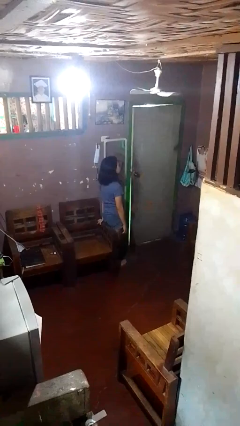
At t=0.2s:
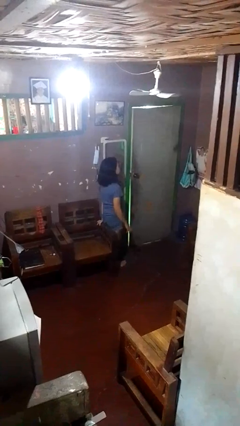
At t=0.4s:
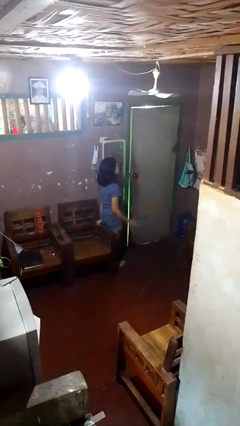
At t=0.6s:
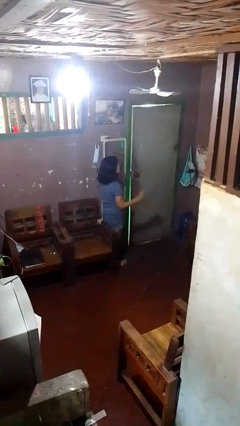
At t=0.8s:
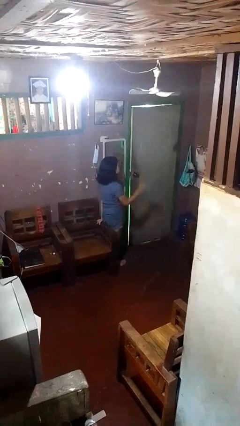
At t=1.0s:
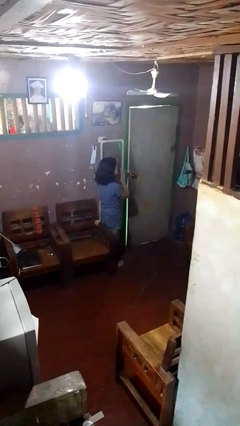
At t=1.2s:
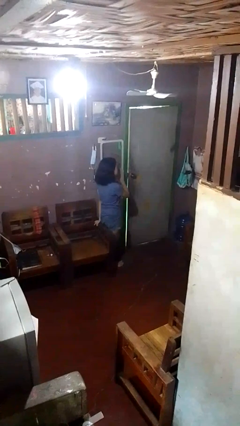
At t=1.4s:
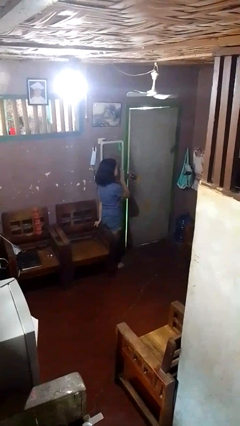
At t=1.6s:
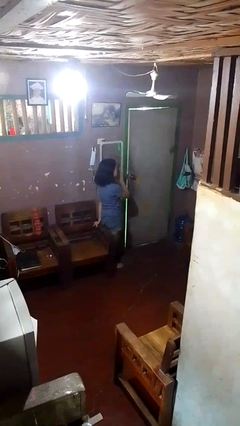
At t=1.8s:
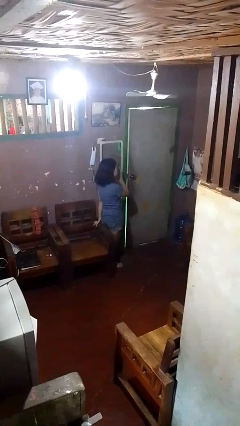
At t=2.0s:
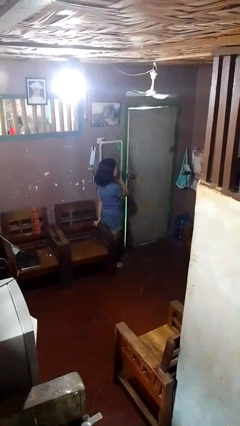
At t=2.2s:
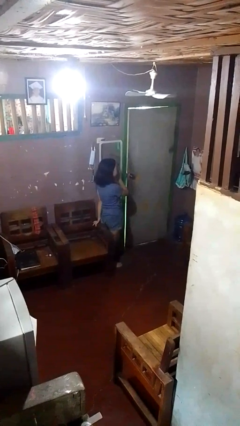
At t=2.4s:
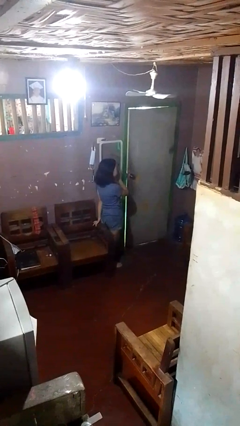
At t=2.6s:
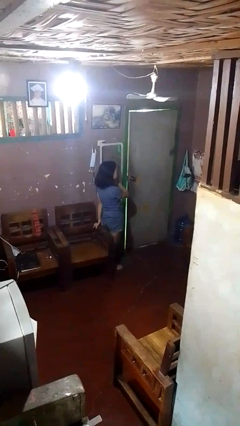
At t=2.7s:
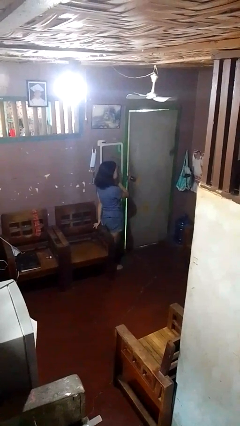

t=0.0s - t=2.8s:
person gestures swipe left

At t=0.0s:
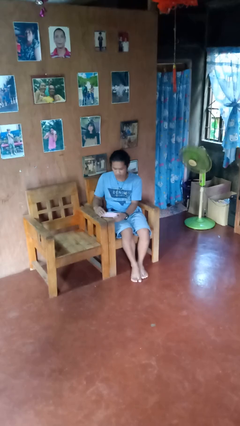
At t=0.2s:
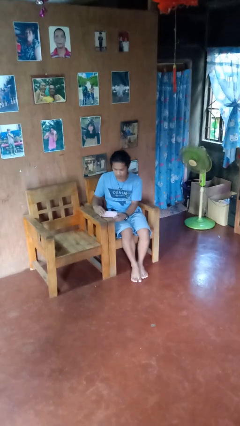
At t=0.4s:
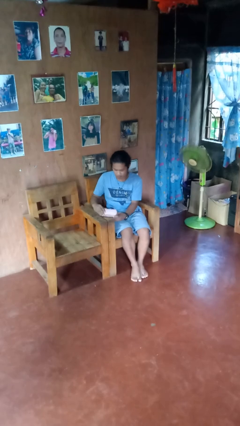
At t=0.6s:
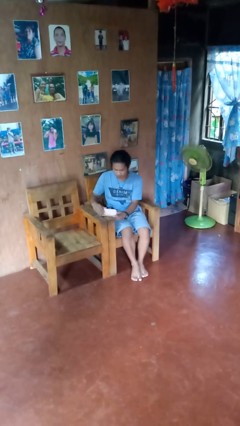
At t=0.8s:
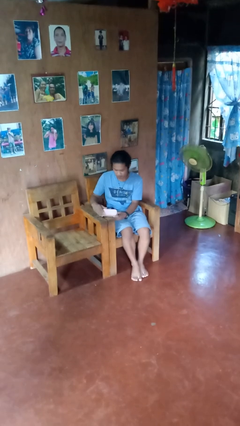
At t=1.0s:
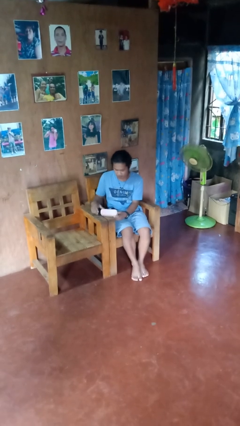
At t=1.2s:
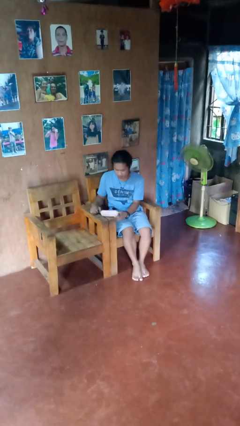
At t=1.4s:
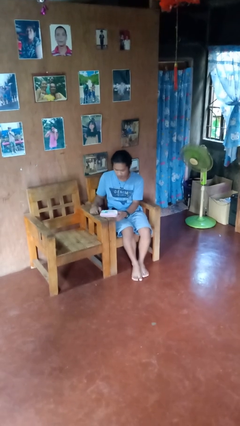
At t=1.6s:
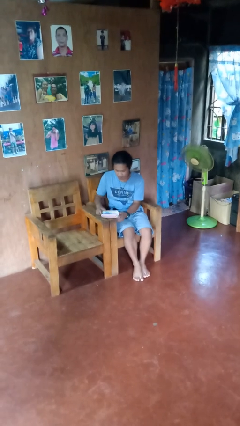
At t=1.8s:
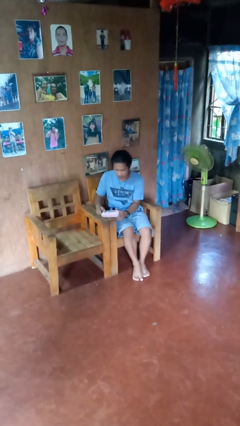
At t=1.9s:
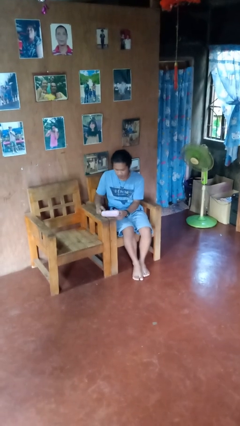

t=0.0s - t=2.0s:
person opens jewelry box

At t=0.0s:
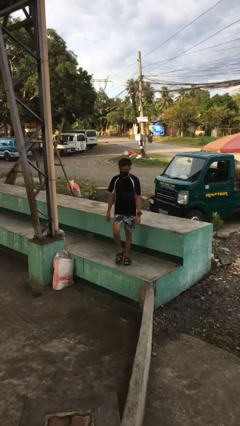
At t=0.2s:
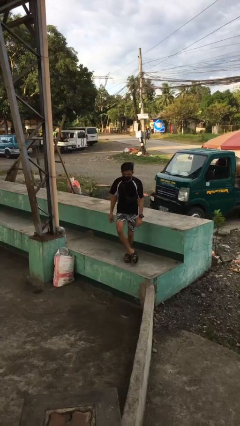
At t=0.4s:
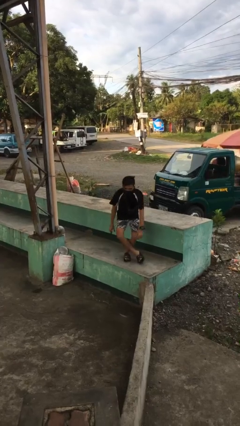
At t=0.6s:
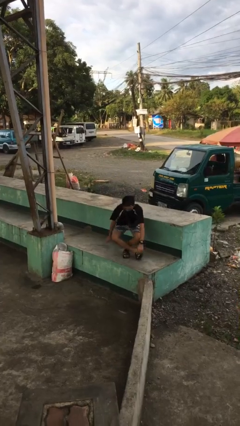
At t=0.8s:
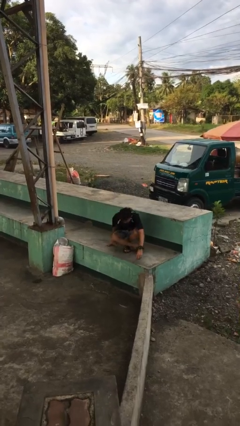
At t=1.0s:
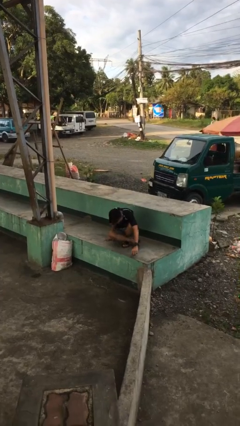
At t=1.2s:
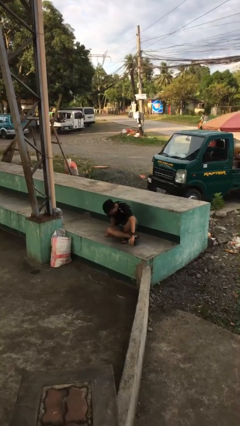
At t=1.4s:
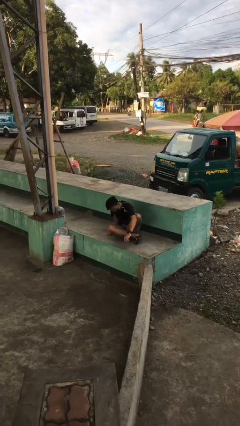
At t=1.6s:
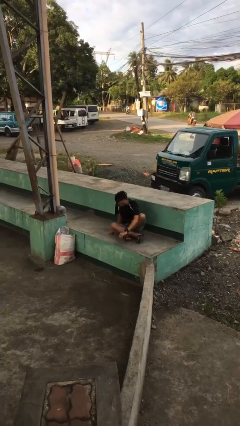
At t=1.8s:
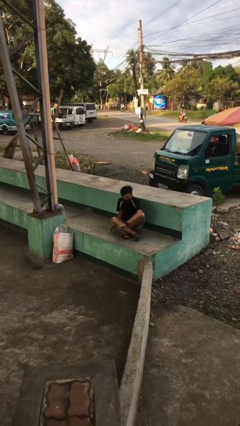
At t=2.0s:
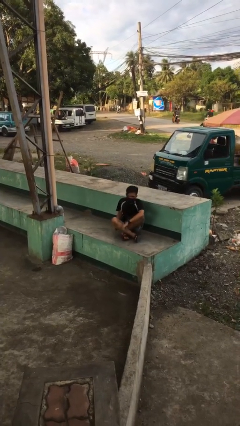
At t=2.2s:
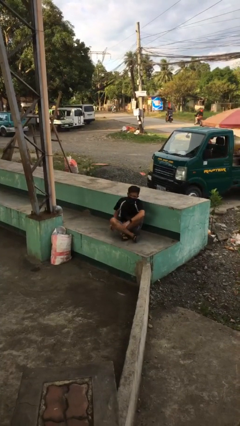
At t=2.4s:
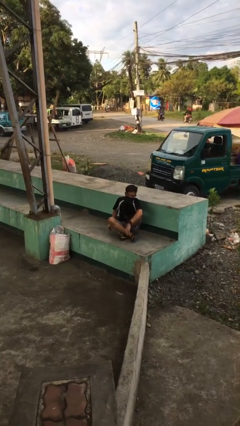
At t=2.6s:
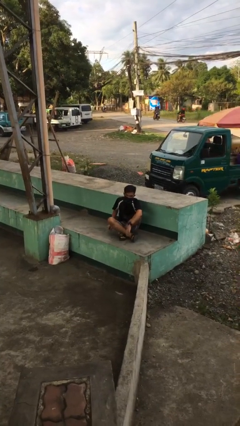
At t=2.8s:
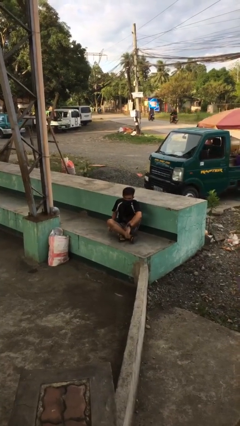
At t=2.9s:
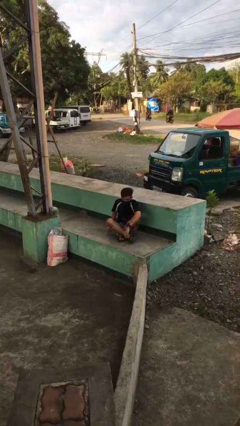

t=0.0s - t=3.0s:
person sits crisscross

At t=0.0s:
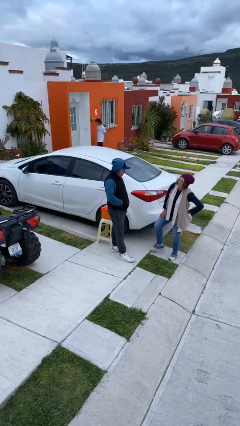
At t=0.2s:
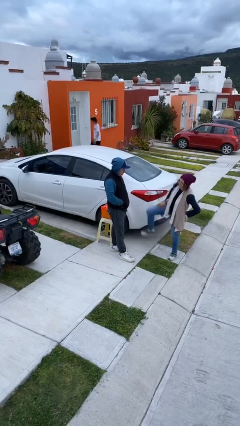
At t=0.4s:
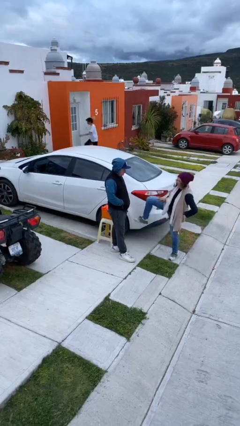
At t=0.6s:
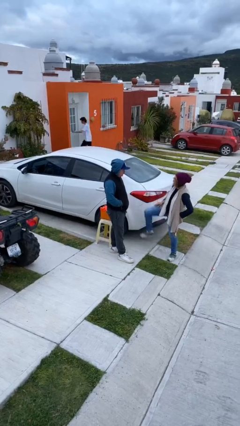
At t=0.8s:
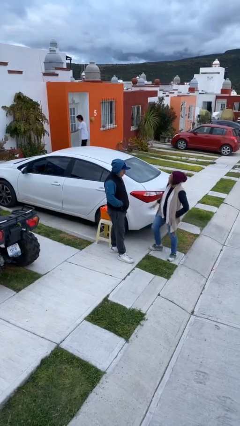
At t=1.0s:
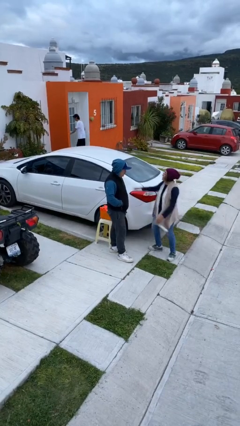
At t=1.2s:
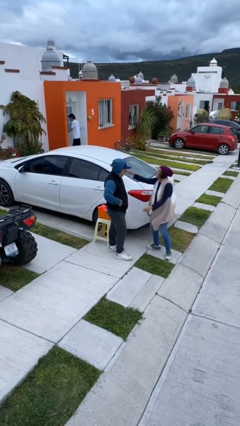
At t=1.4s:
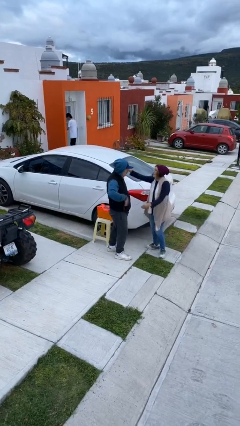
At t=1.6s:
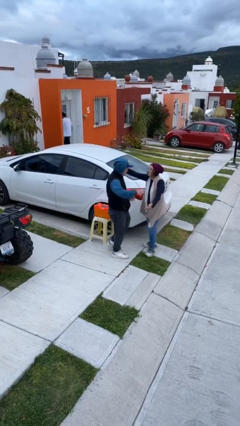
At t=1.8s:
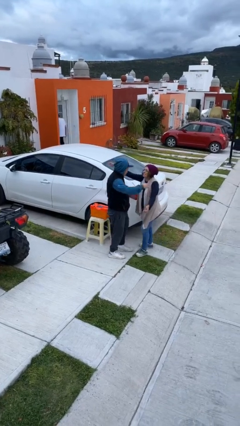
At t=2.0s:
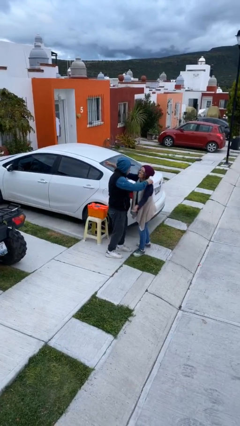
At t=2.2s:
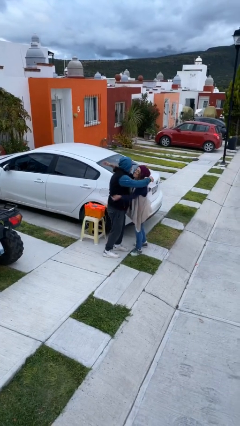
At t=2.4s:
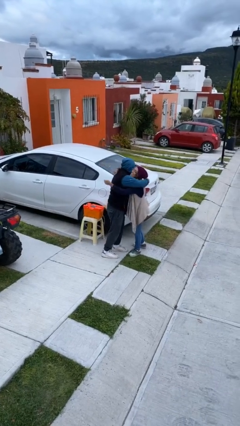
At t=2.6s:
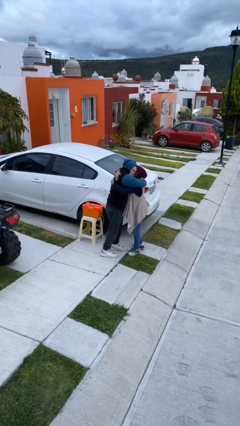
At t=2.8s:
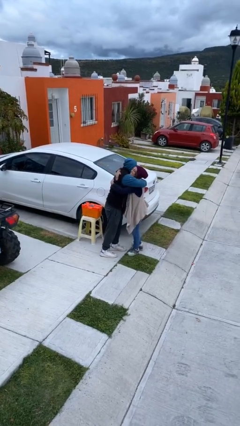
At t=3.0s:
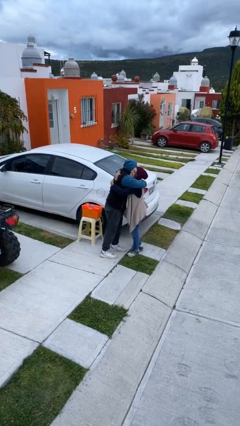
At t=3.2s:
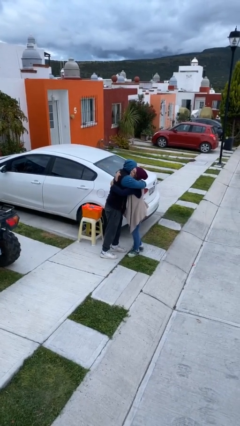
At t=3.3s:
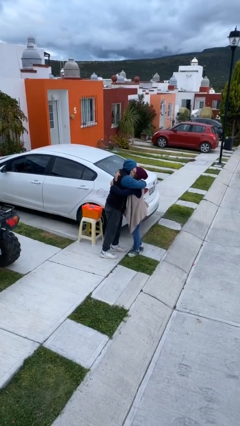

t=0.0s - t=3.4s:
person embraces person

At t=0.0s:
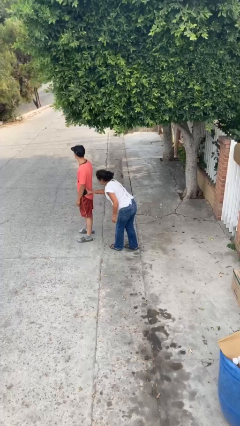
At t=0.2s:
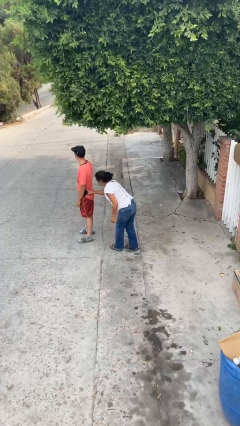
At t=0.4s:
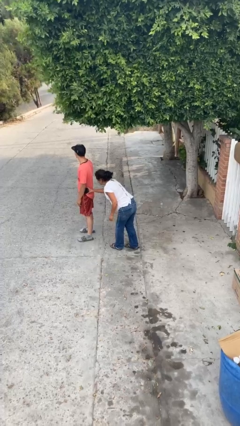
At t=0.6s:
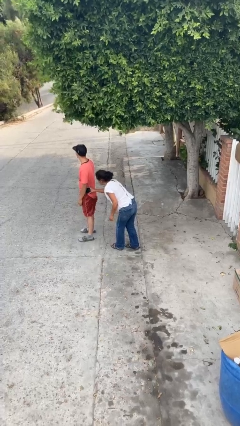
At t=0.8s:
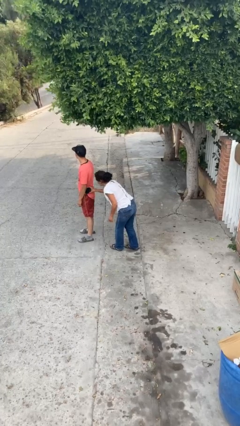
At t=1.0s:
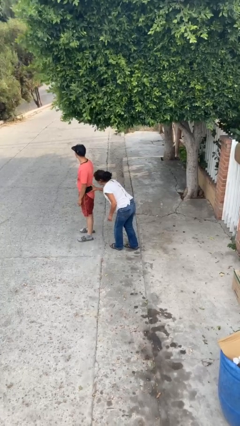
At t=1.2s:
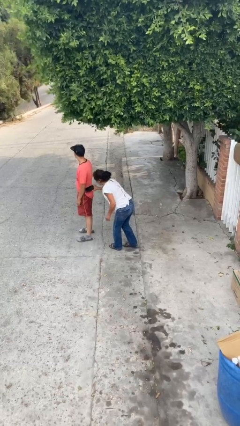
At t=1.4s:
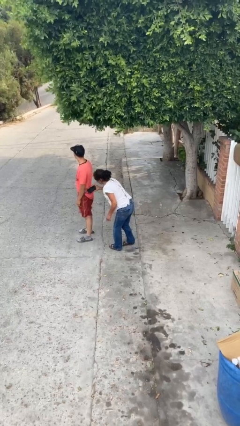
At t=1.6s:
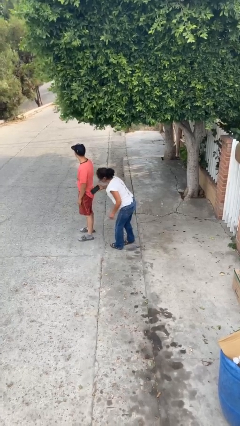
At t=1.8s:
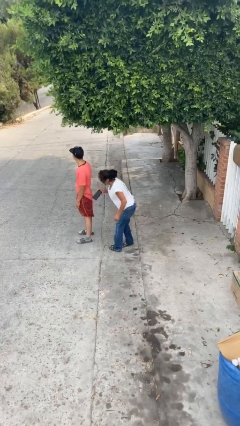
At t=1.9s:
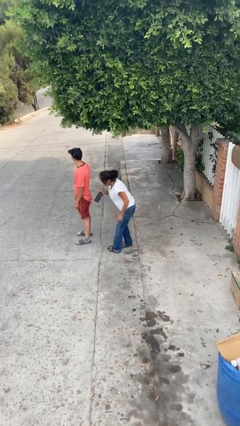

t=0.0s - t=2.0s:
person steals object from person

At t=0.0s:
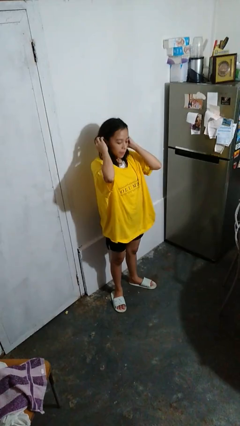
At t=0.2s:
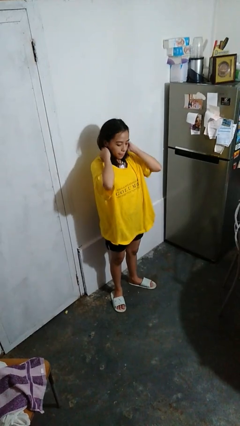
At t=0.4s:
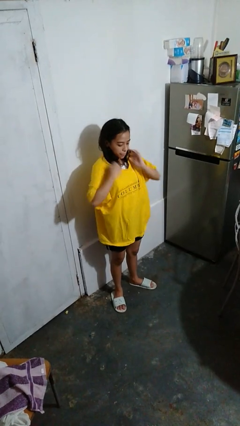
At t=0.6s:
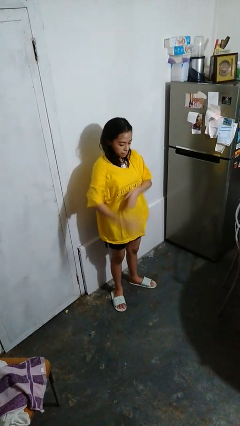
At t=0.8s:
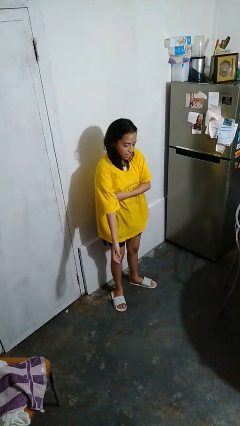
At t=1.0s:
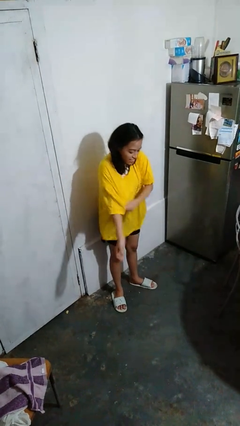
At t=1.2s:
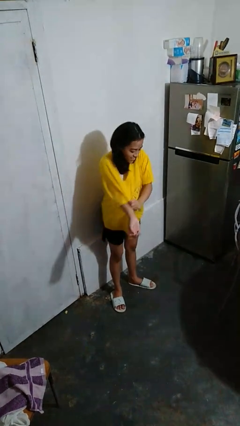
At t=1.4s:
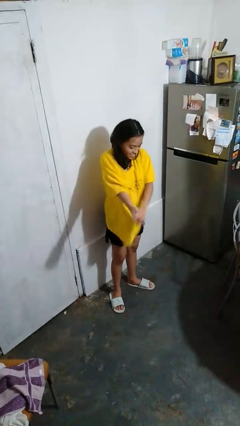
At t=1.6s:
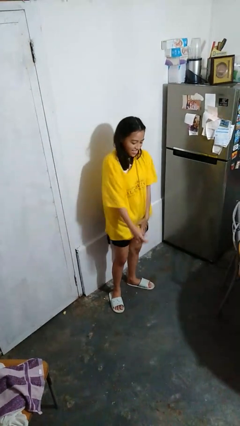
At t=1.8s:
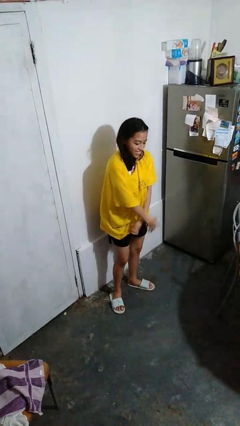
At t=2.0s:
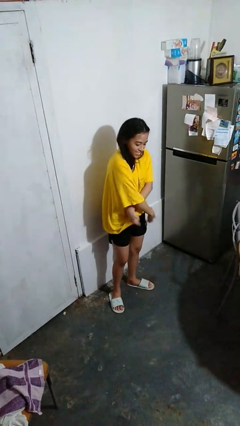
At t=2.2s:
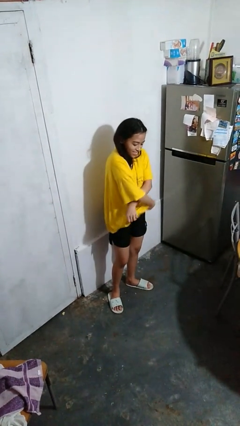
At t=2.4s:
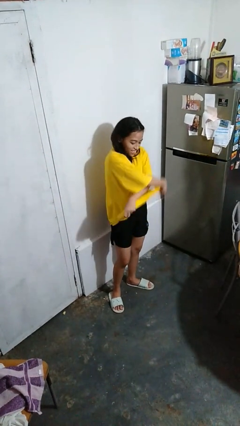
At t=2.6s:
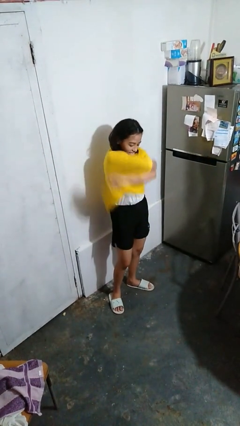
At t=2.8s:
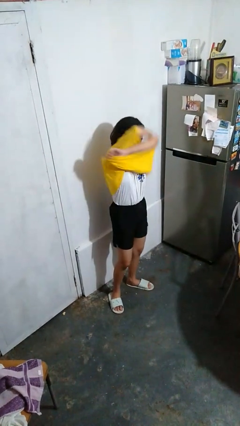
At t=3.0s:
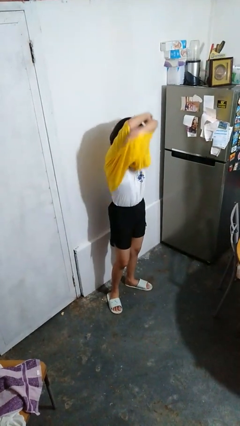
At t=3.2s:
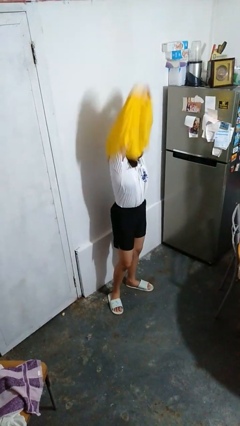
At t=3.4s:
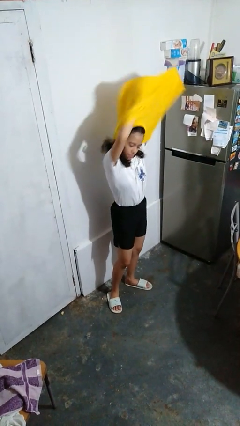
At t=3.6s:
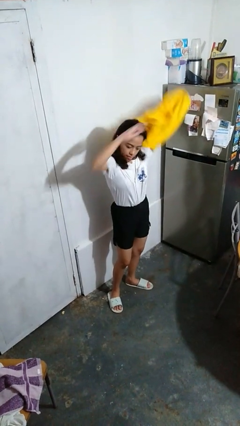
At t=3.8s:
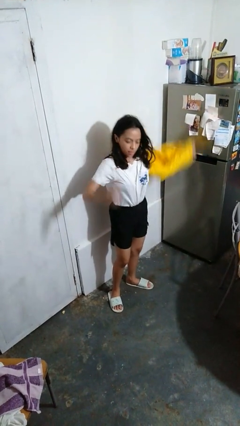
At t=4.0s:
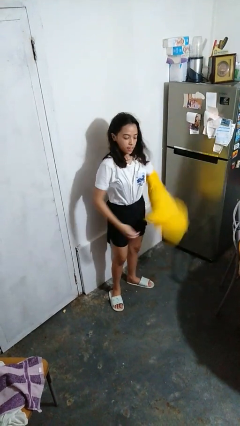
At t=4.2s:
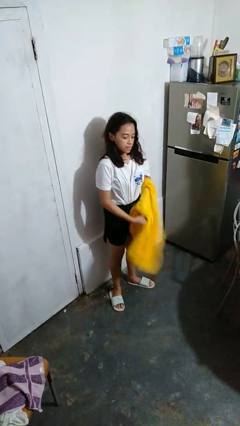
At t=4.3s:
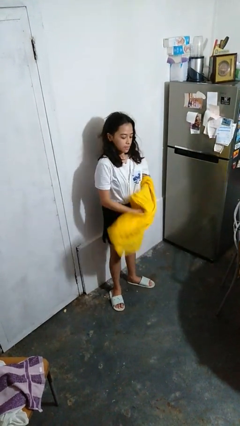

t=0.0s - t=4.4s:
person takes off shirt
